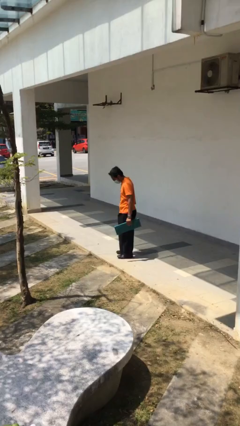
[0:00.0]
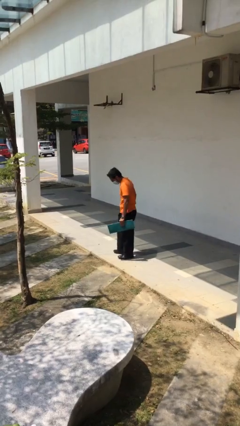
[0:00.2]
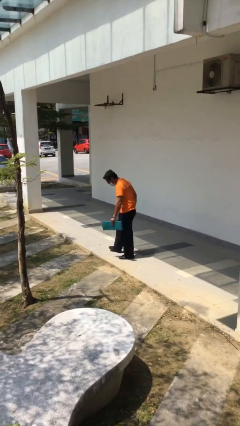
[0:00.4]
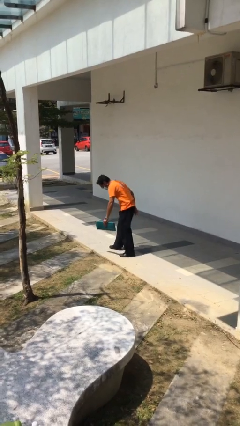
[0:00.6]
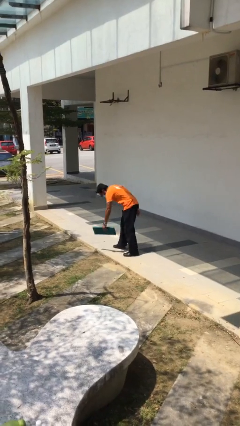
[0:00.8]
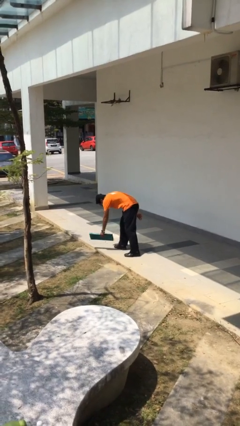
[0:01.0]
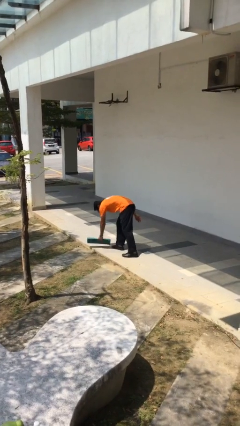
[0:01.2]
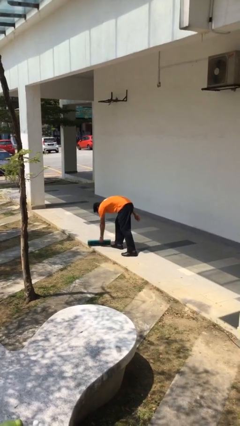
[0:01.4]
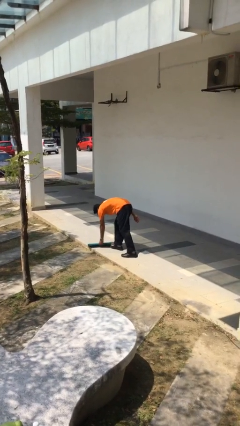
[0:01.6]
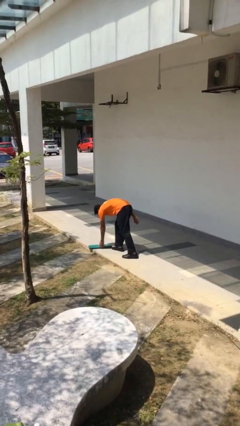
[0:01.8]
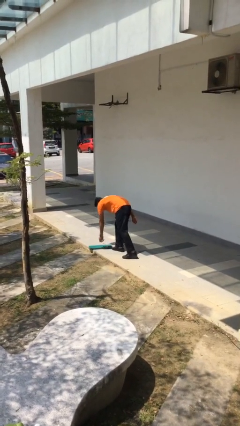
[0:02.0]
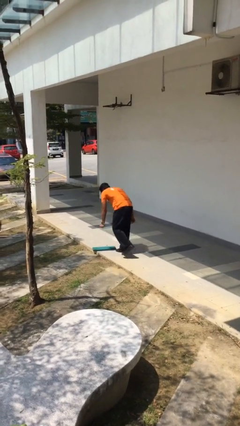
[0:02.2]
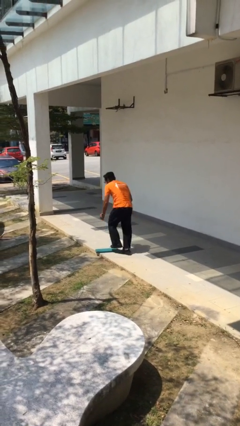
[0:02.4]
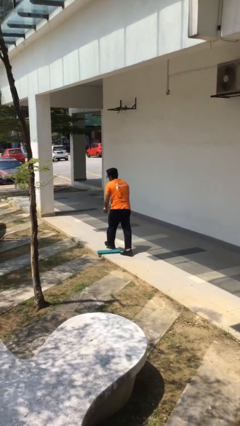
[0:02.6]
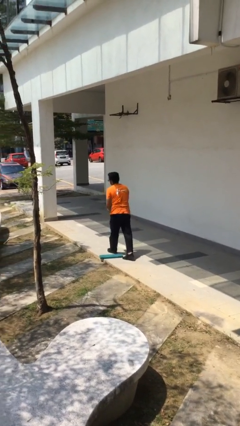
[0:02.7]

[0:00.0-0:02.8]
person puts down object on floor

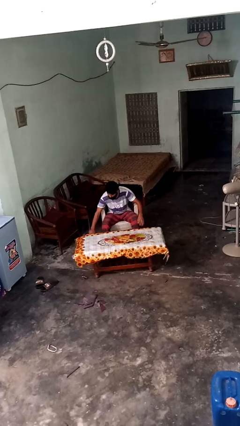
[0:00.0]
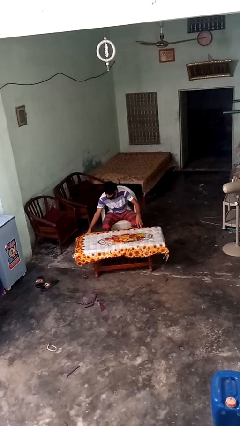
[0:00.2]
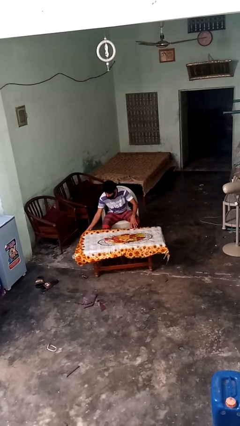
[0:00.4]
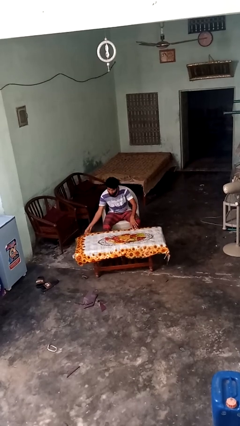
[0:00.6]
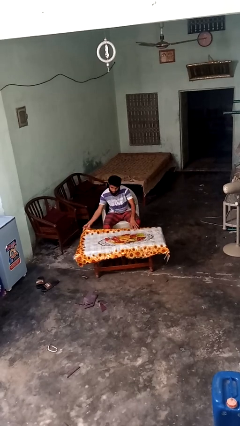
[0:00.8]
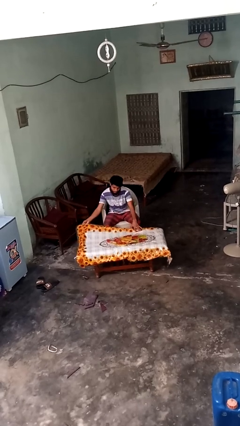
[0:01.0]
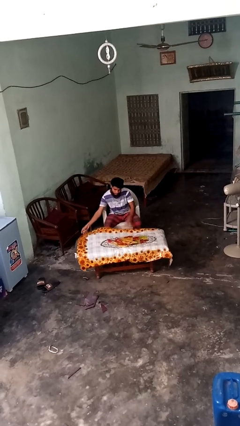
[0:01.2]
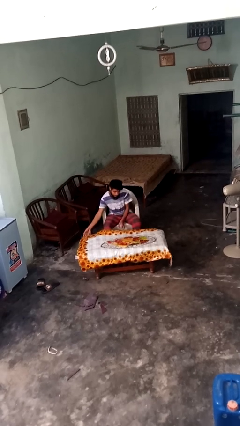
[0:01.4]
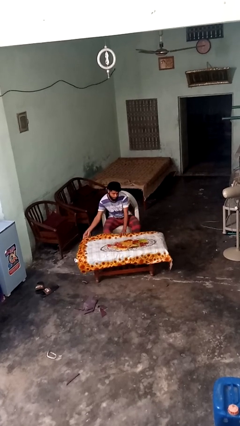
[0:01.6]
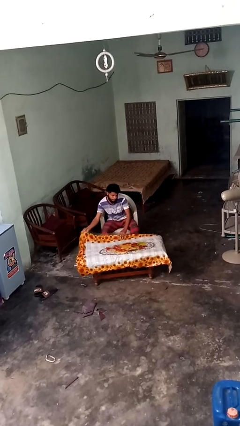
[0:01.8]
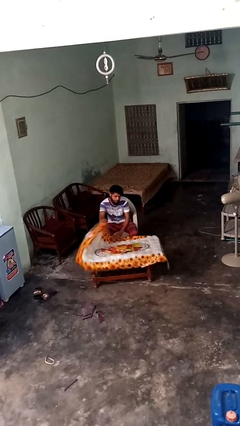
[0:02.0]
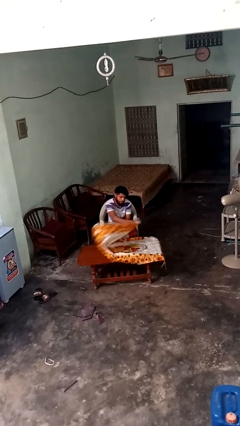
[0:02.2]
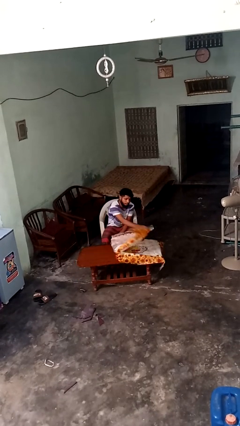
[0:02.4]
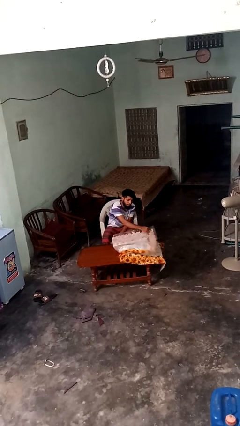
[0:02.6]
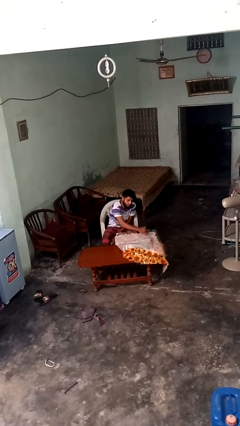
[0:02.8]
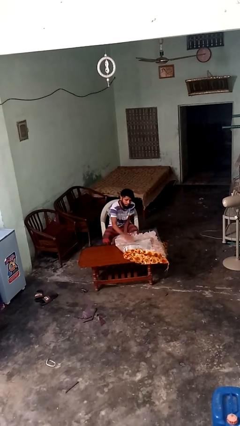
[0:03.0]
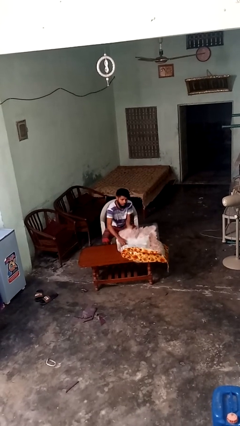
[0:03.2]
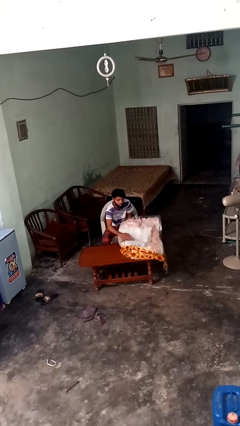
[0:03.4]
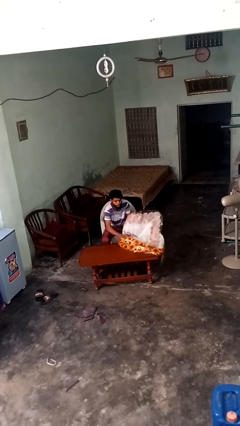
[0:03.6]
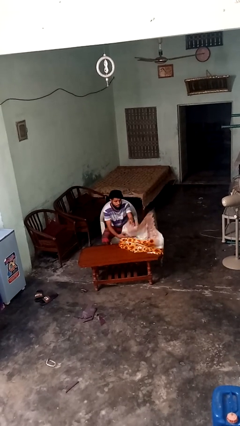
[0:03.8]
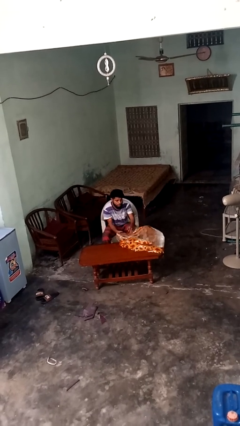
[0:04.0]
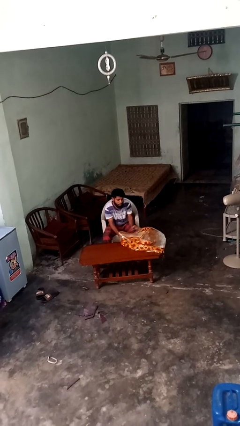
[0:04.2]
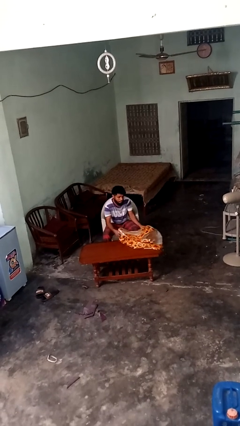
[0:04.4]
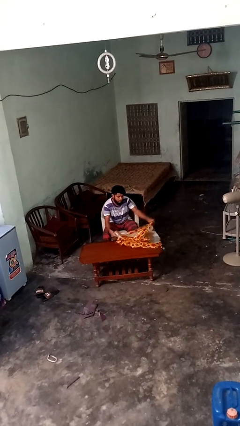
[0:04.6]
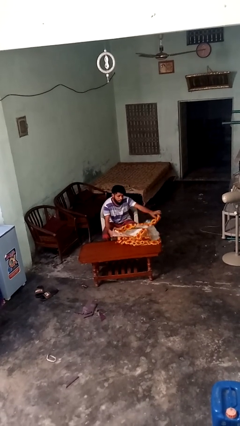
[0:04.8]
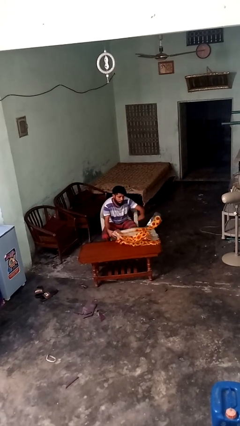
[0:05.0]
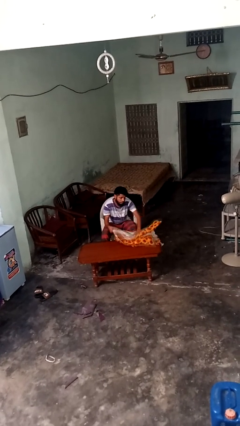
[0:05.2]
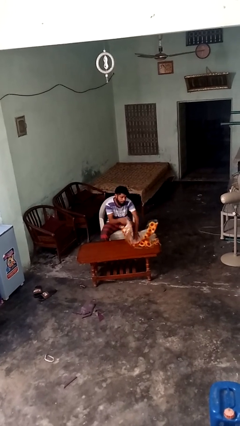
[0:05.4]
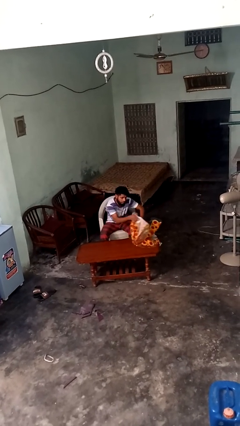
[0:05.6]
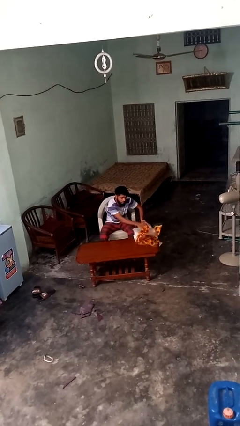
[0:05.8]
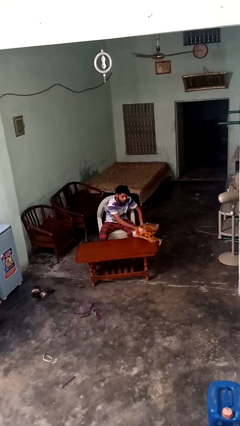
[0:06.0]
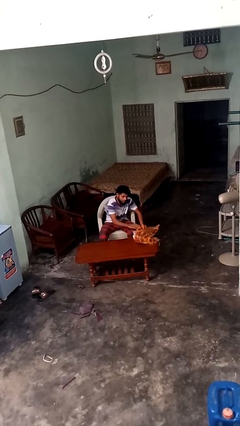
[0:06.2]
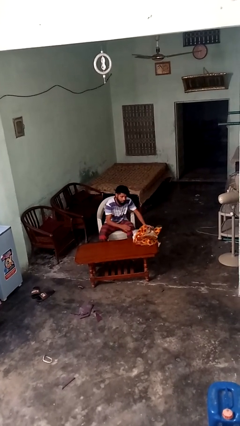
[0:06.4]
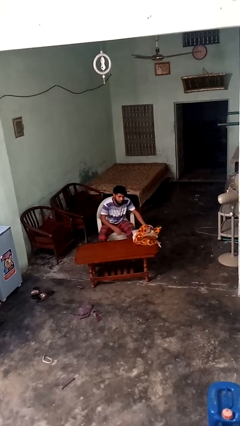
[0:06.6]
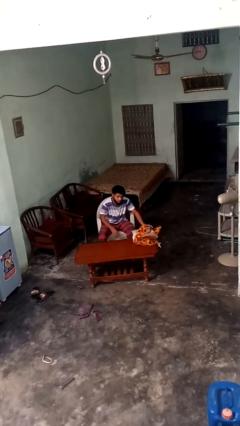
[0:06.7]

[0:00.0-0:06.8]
person folds tablecloth

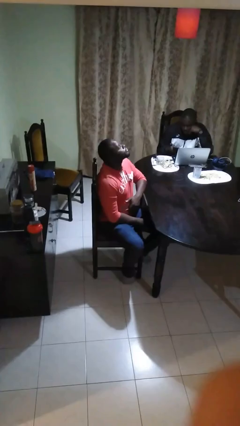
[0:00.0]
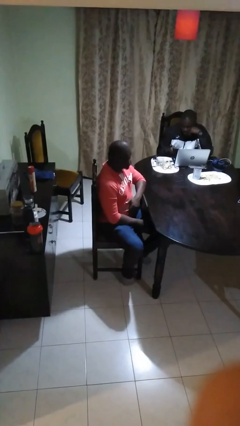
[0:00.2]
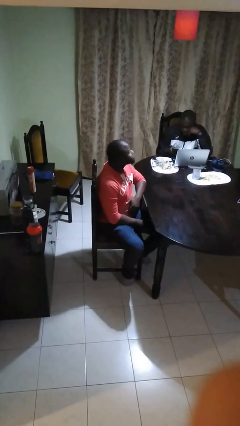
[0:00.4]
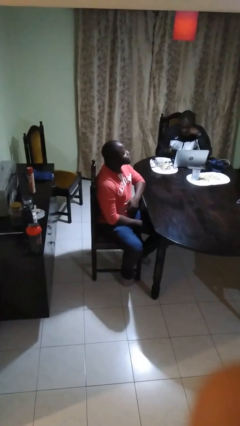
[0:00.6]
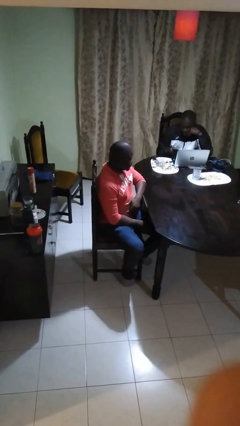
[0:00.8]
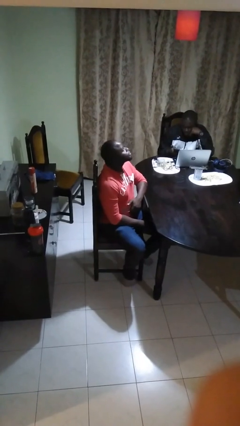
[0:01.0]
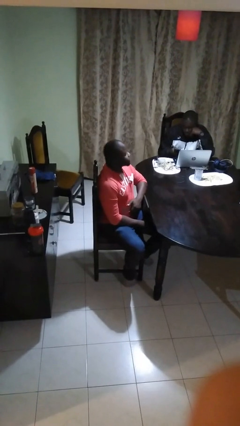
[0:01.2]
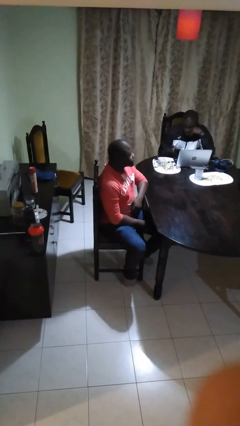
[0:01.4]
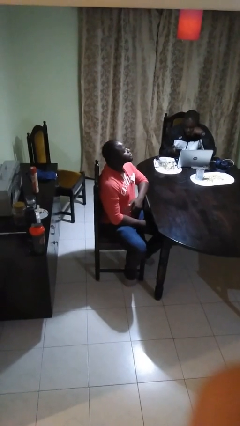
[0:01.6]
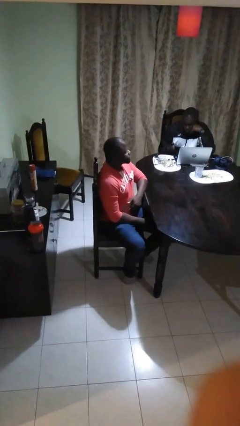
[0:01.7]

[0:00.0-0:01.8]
person nods head

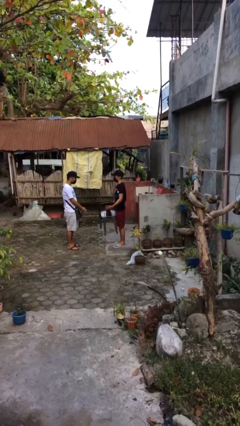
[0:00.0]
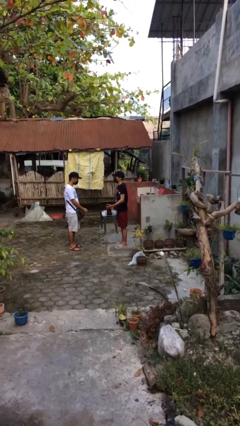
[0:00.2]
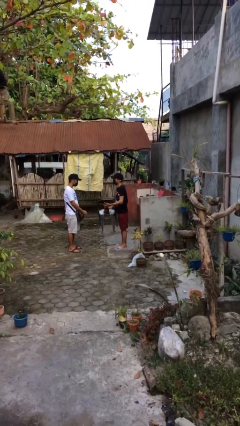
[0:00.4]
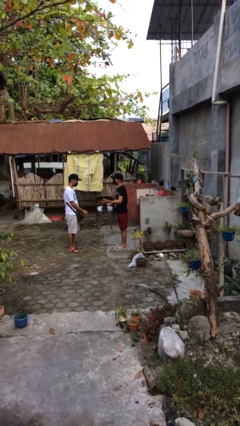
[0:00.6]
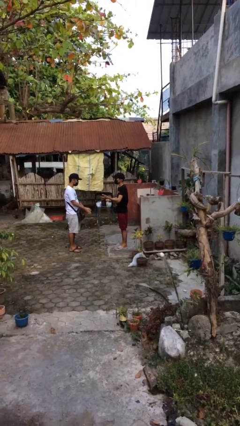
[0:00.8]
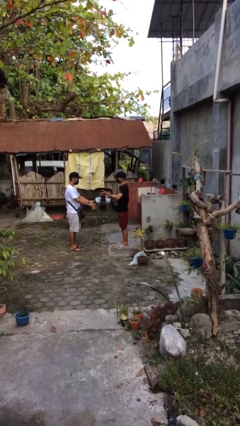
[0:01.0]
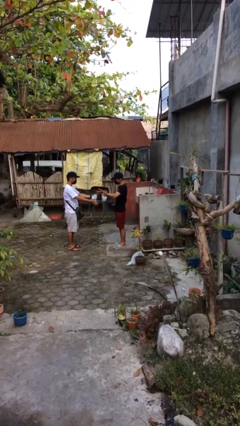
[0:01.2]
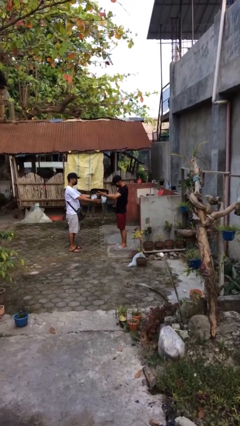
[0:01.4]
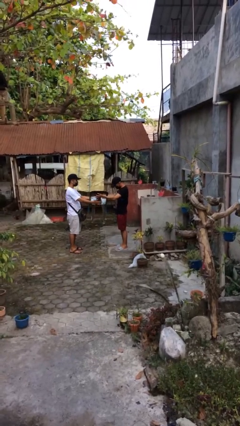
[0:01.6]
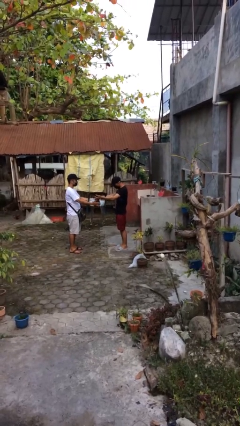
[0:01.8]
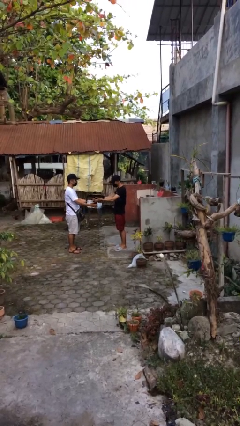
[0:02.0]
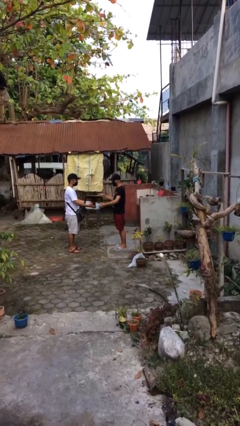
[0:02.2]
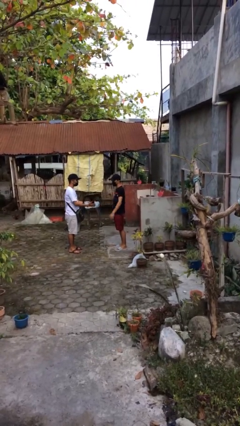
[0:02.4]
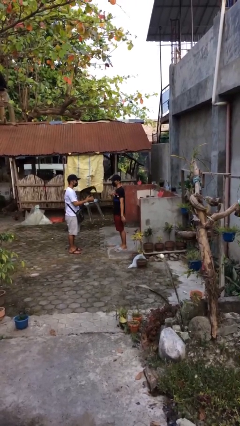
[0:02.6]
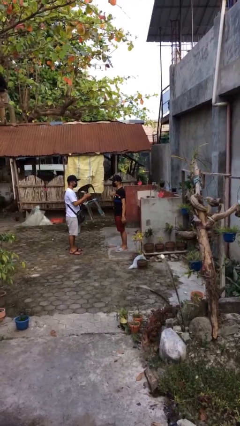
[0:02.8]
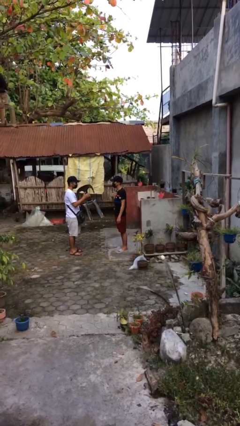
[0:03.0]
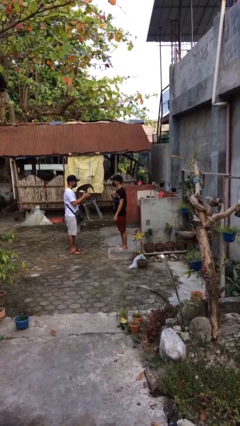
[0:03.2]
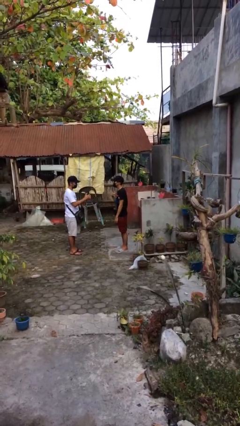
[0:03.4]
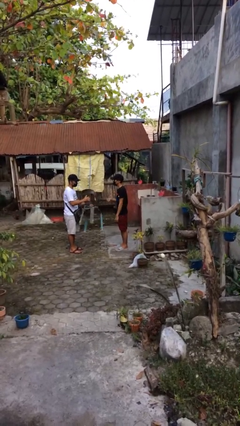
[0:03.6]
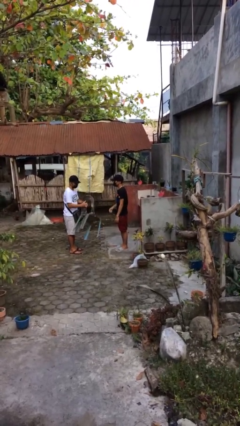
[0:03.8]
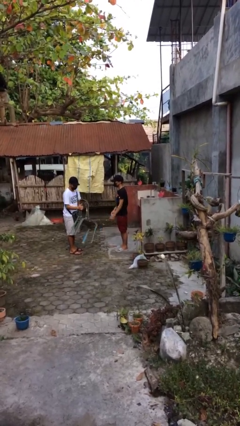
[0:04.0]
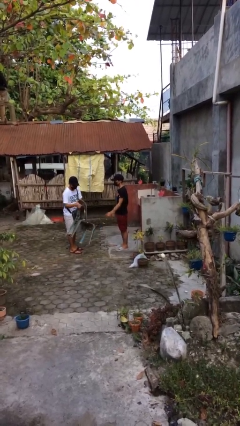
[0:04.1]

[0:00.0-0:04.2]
person transfers object to person

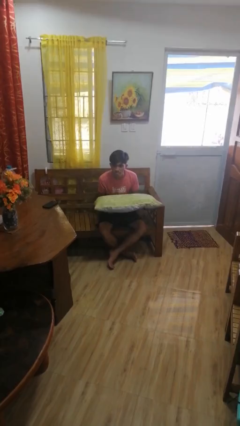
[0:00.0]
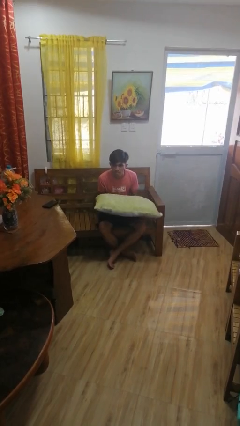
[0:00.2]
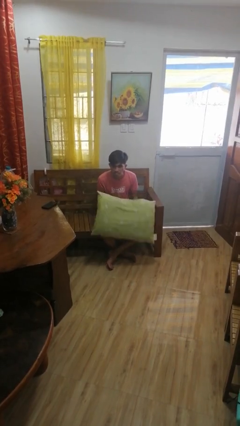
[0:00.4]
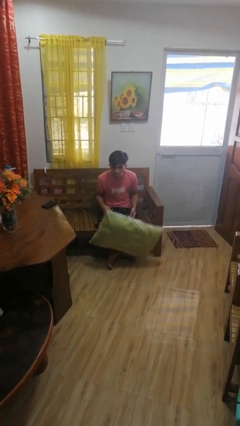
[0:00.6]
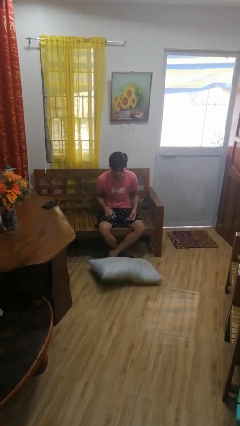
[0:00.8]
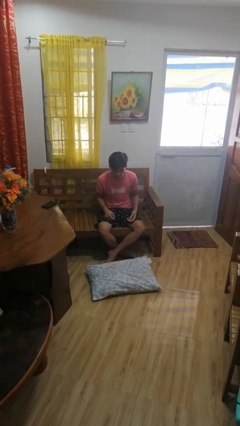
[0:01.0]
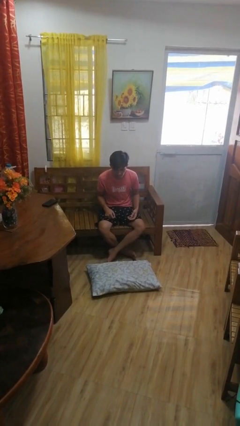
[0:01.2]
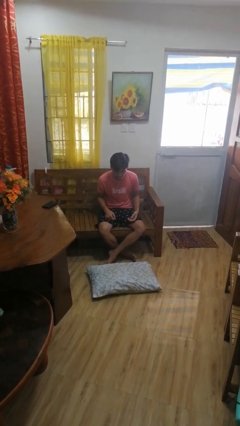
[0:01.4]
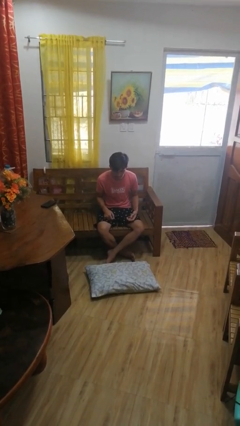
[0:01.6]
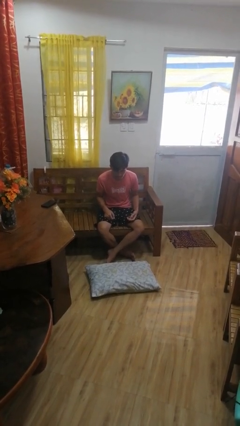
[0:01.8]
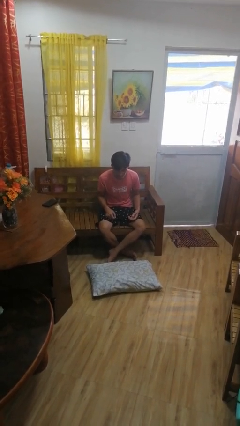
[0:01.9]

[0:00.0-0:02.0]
person drops object
